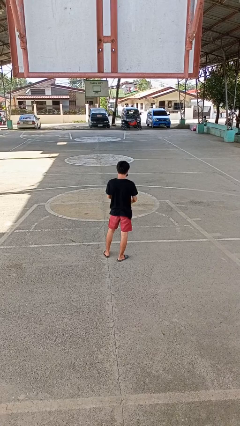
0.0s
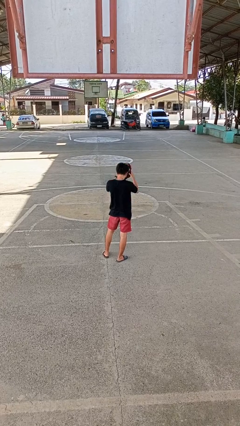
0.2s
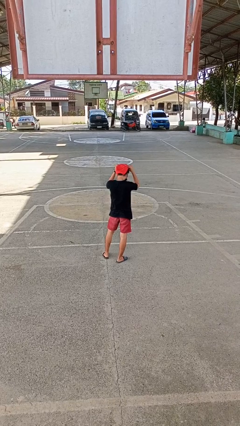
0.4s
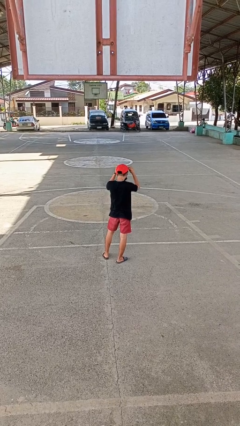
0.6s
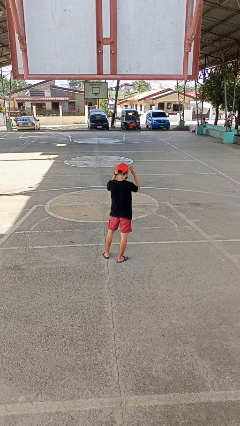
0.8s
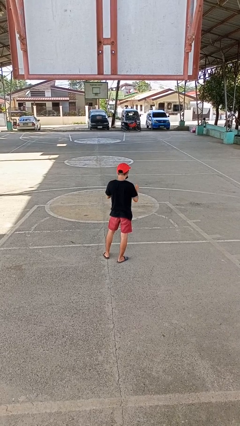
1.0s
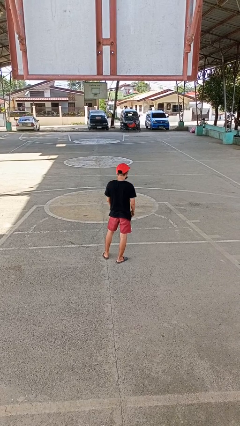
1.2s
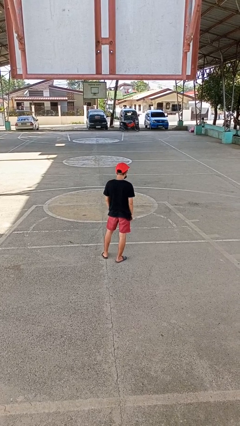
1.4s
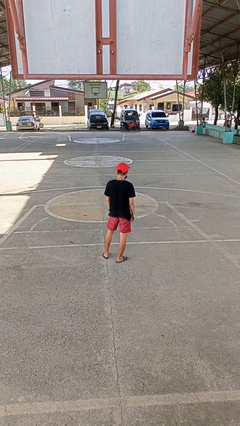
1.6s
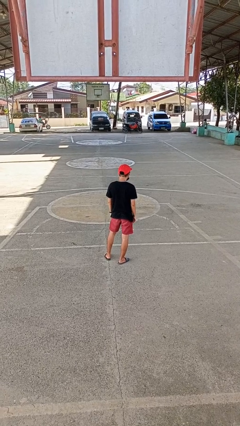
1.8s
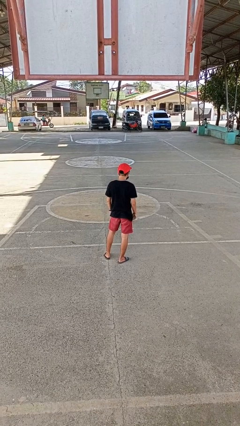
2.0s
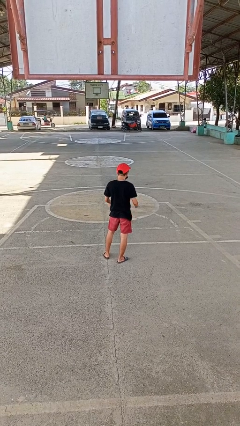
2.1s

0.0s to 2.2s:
person puts on hat

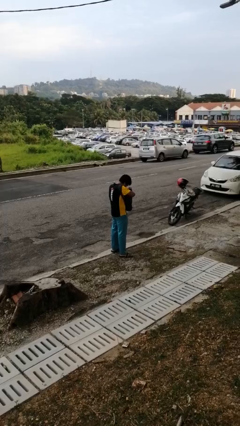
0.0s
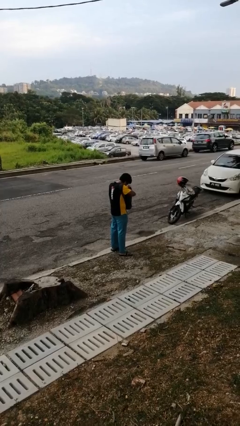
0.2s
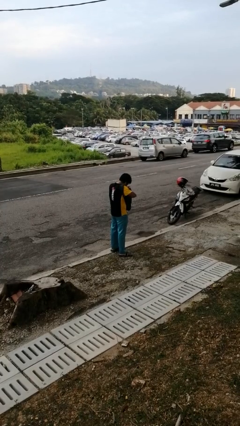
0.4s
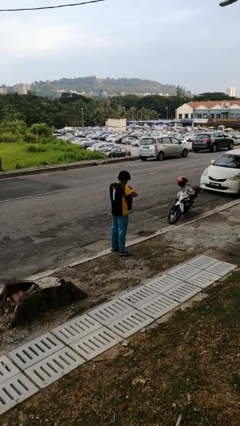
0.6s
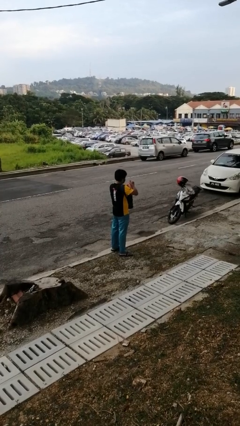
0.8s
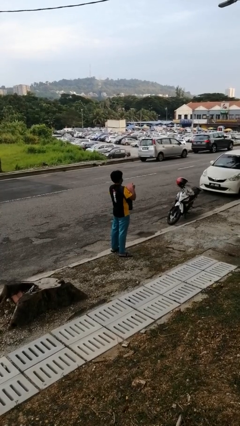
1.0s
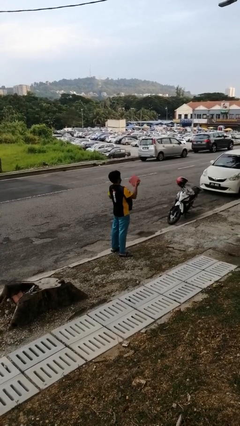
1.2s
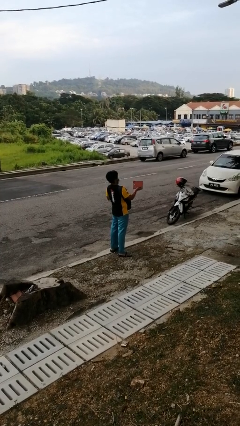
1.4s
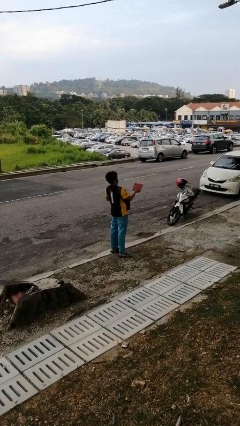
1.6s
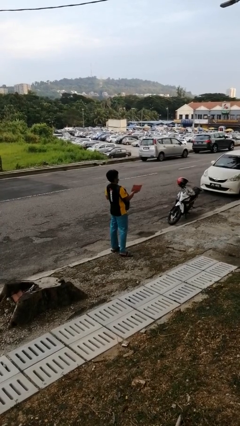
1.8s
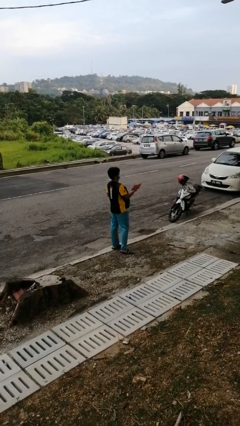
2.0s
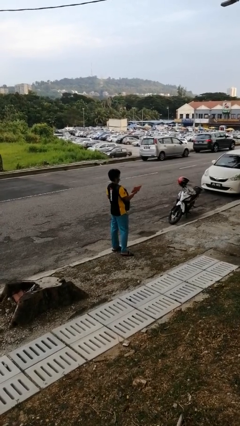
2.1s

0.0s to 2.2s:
person takes object from backpack

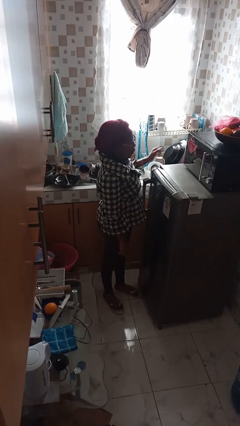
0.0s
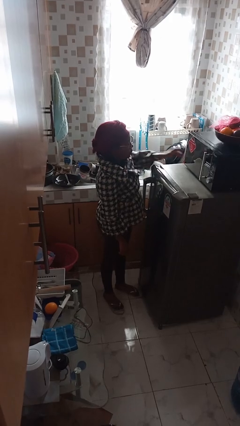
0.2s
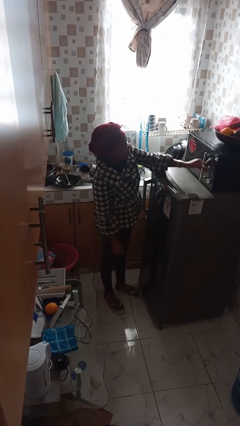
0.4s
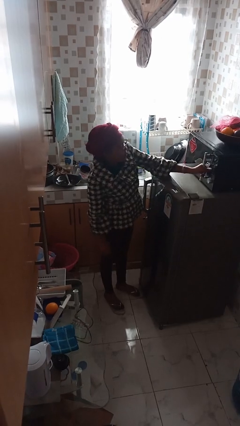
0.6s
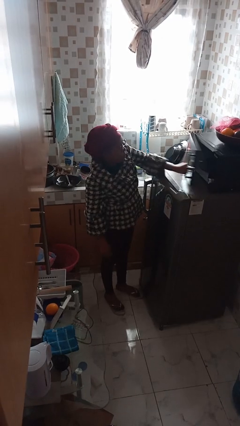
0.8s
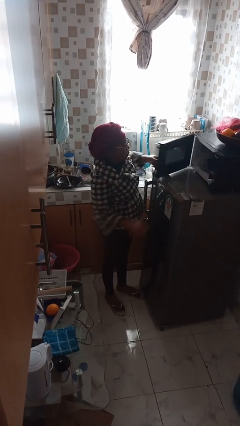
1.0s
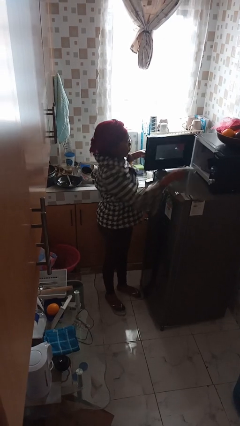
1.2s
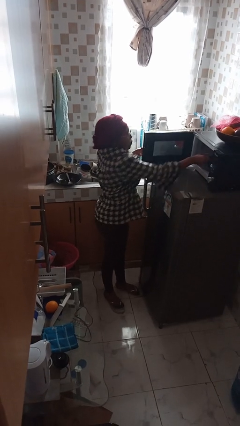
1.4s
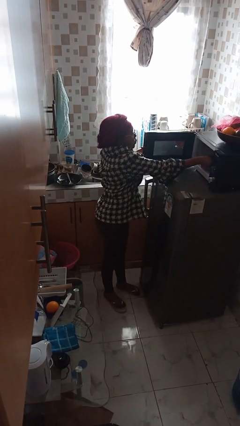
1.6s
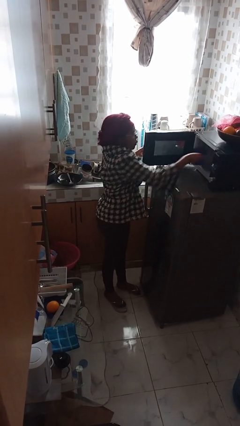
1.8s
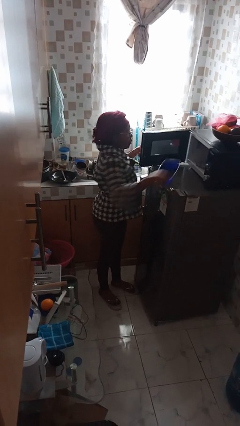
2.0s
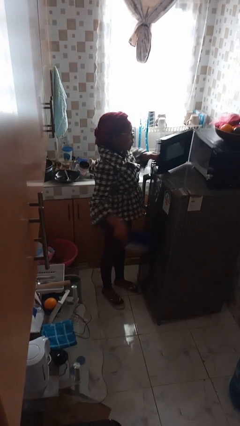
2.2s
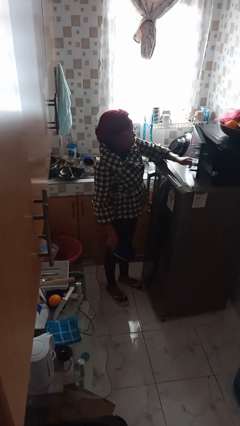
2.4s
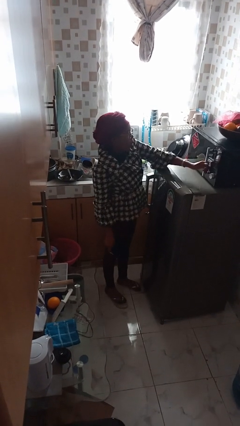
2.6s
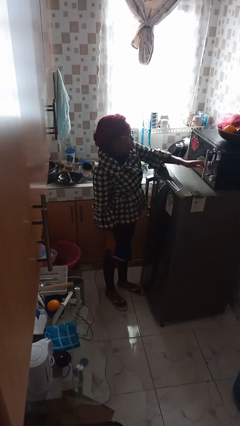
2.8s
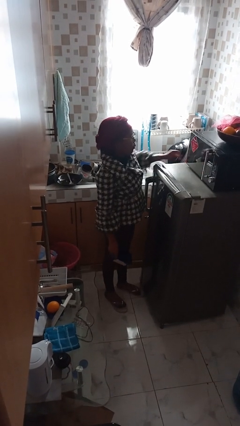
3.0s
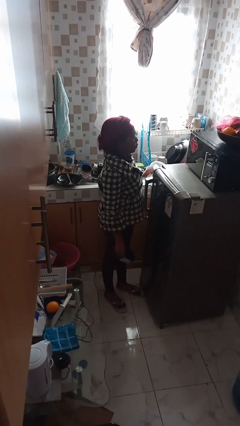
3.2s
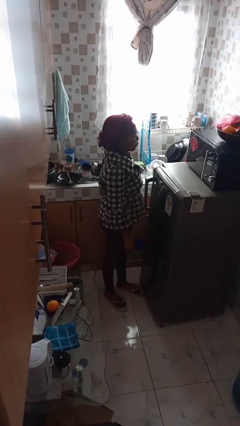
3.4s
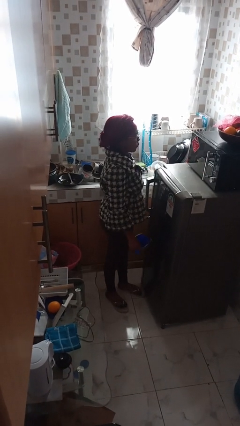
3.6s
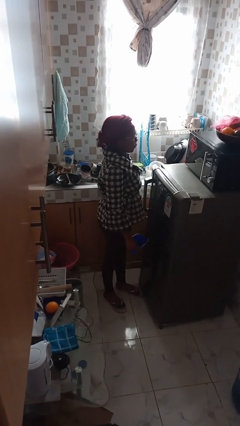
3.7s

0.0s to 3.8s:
person takes object from microwave

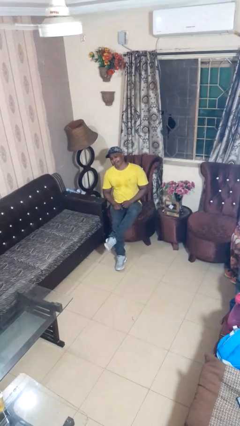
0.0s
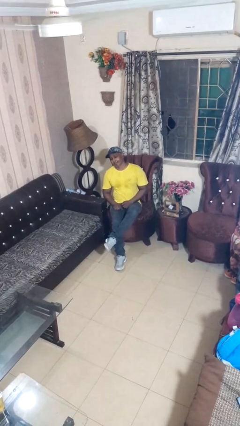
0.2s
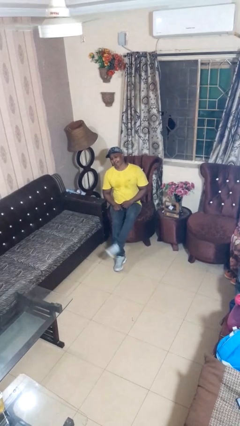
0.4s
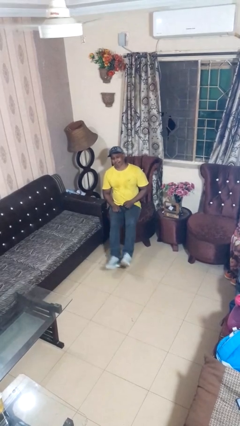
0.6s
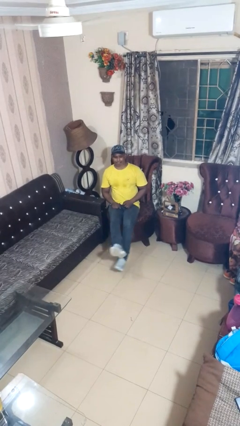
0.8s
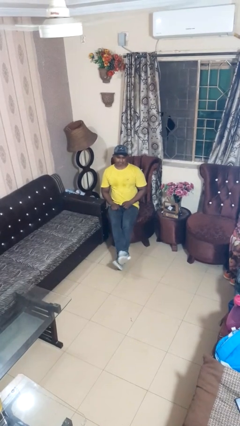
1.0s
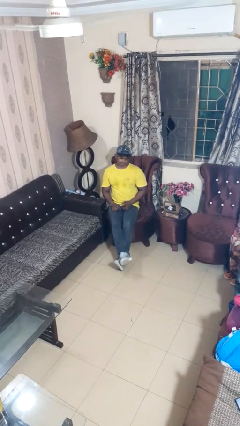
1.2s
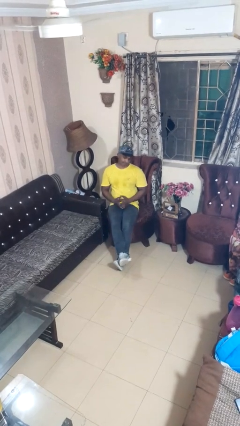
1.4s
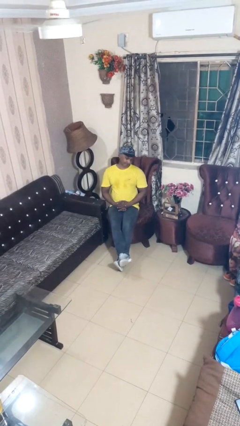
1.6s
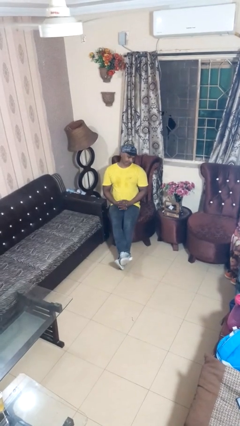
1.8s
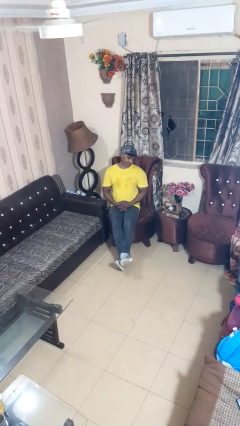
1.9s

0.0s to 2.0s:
person crosses legs

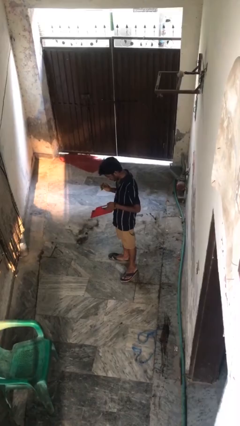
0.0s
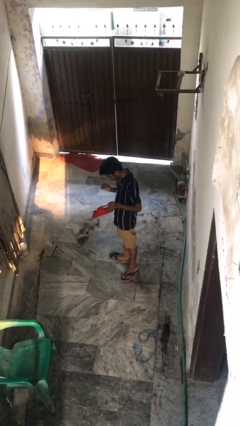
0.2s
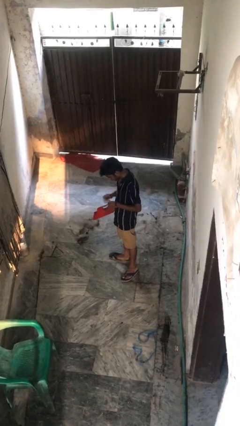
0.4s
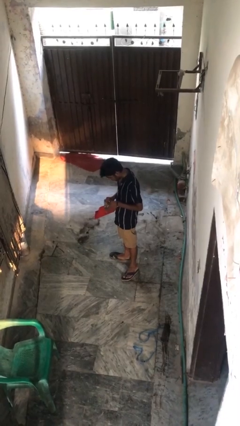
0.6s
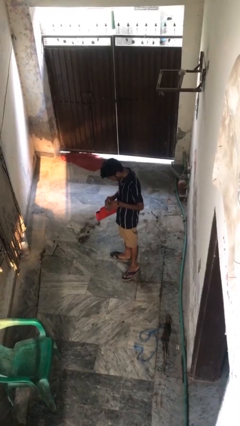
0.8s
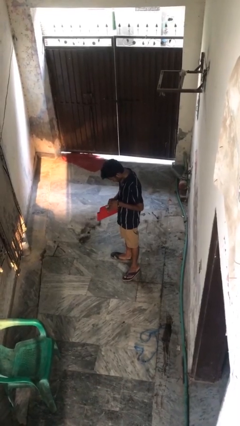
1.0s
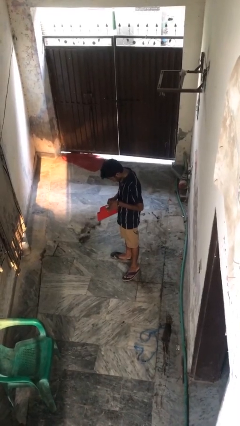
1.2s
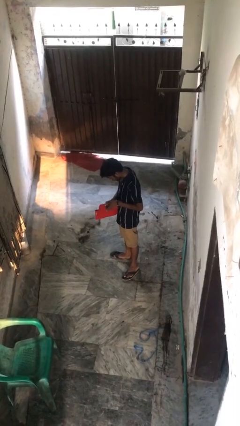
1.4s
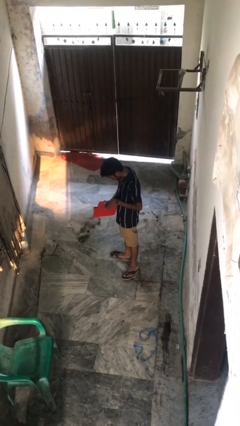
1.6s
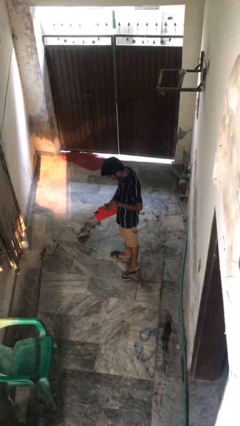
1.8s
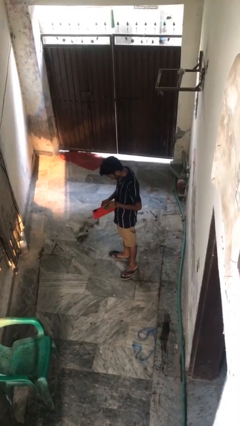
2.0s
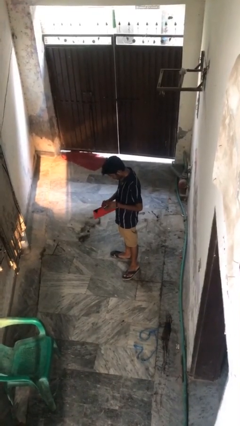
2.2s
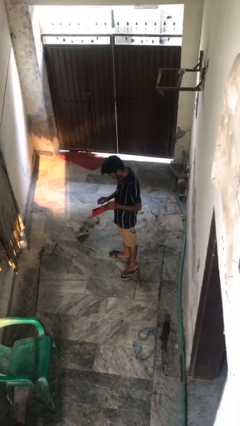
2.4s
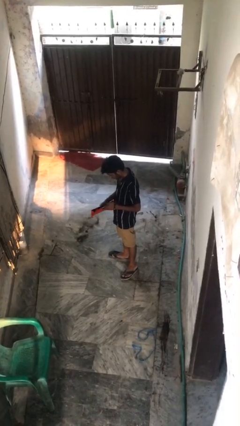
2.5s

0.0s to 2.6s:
person puts object into purse

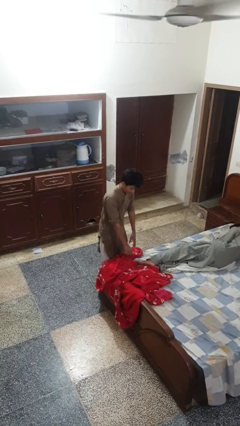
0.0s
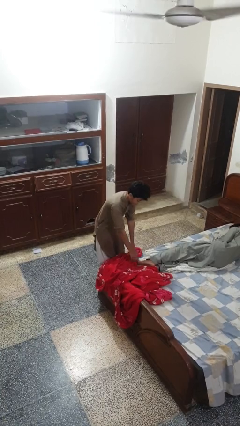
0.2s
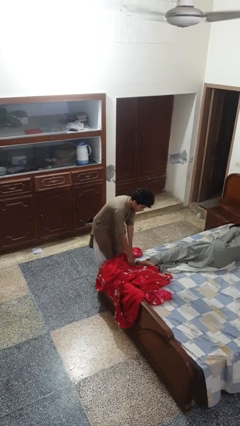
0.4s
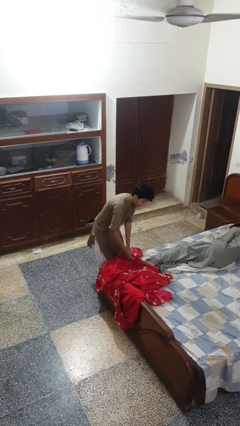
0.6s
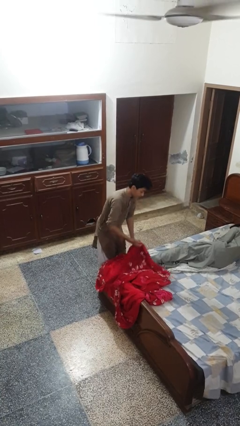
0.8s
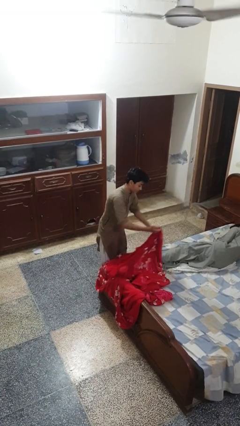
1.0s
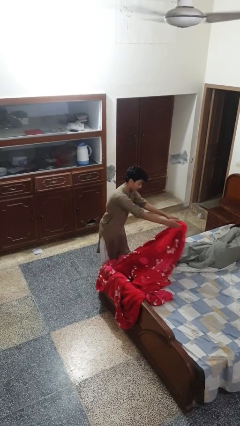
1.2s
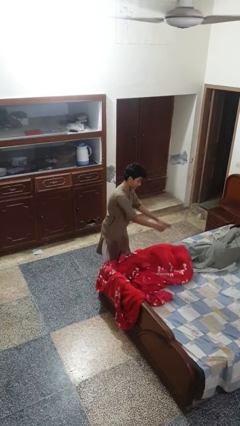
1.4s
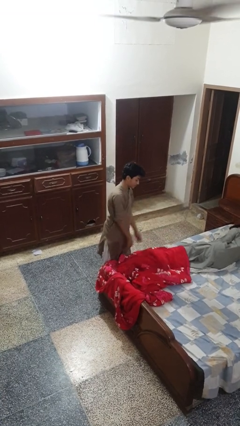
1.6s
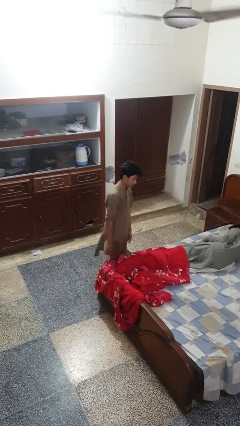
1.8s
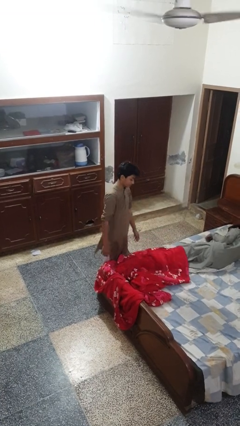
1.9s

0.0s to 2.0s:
person covers friend with blanket

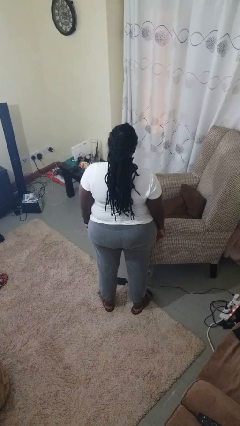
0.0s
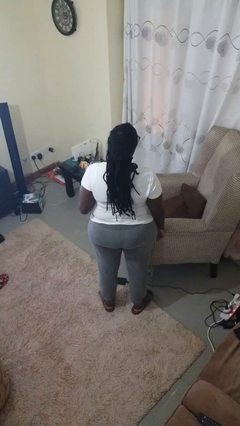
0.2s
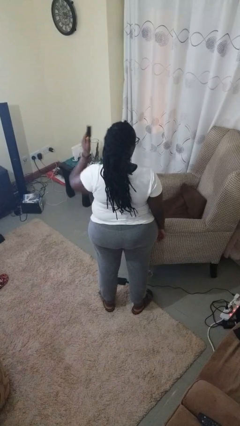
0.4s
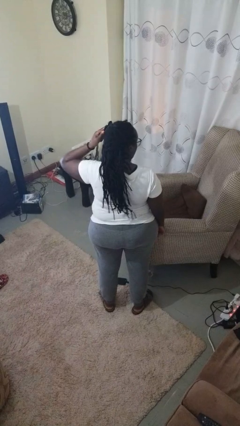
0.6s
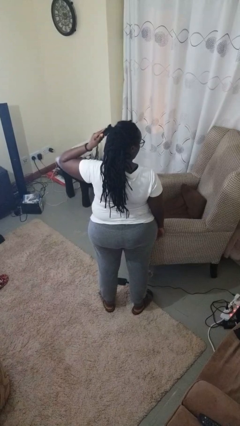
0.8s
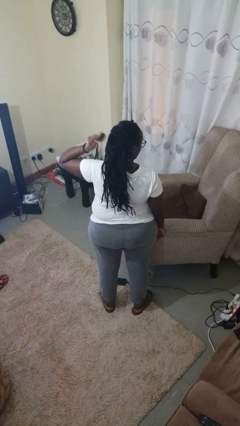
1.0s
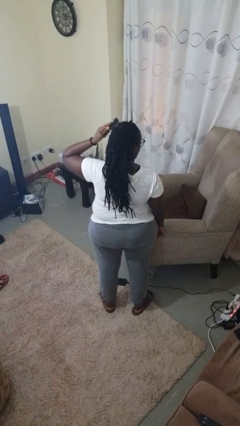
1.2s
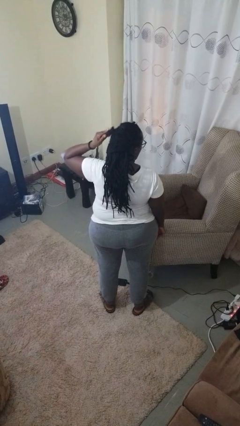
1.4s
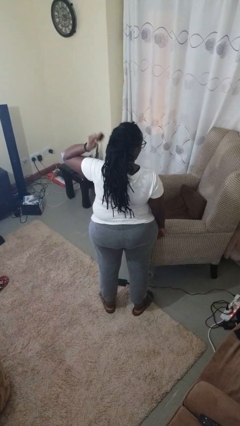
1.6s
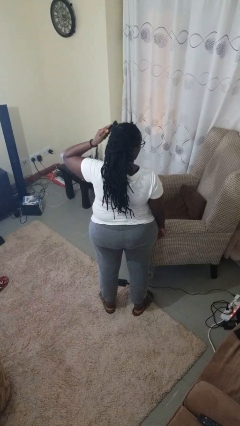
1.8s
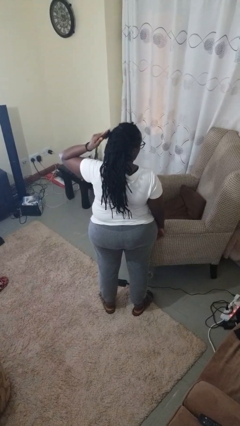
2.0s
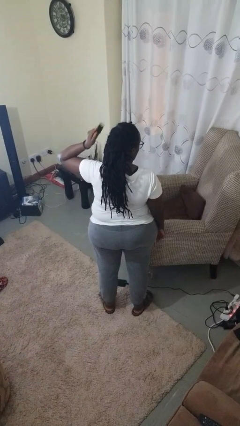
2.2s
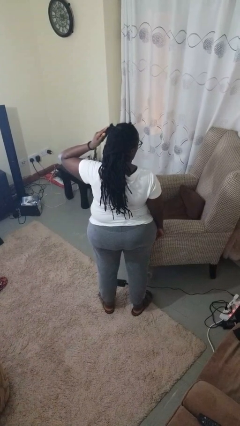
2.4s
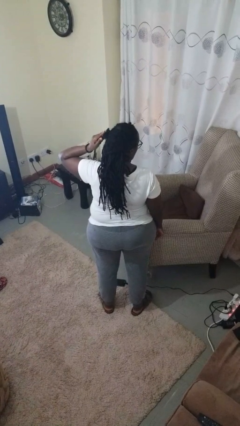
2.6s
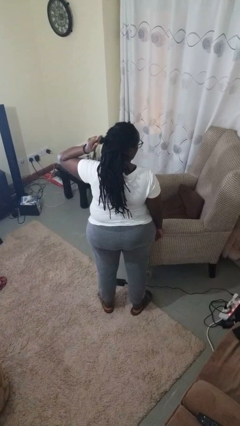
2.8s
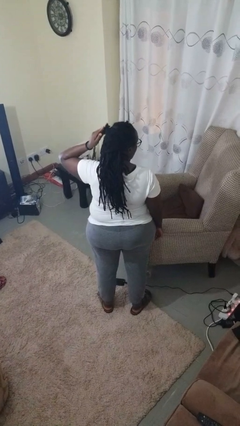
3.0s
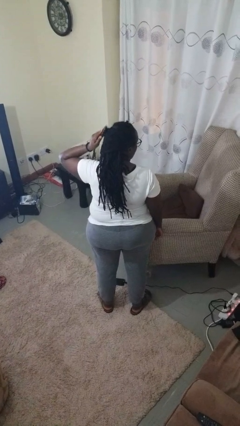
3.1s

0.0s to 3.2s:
person brushes hair
